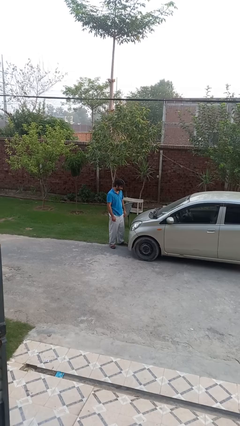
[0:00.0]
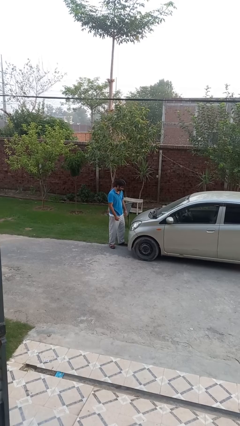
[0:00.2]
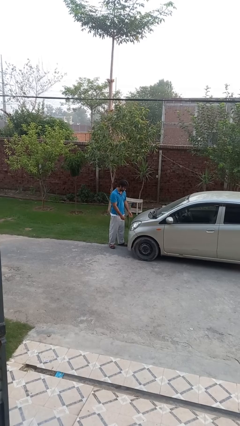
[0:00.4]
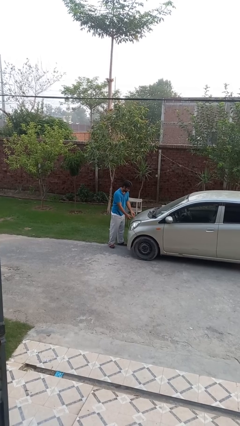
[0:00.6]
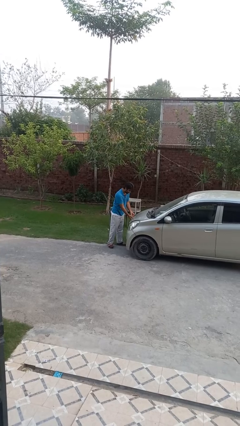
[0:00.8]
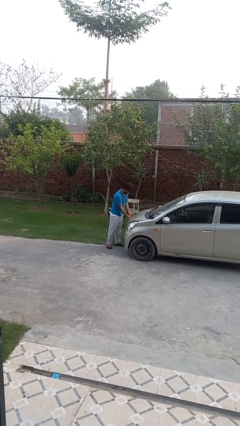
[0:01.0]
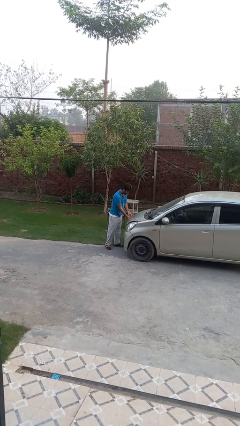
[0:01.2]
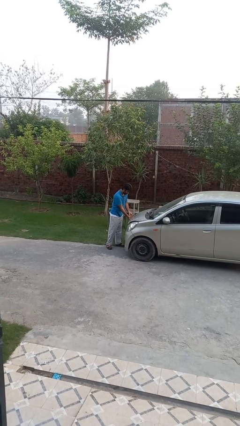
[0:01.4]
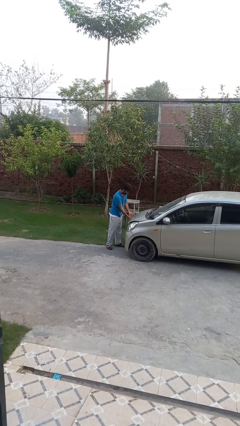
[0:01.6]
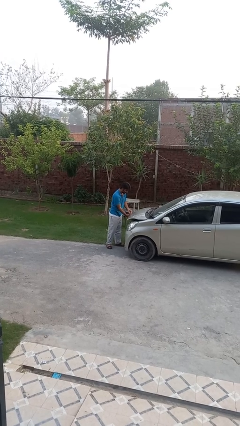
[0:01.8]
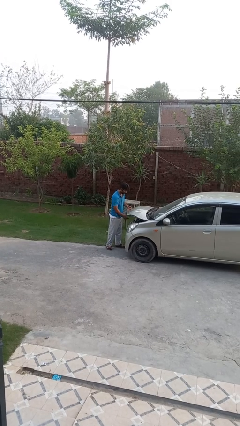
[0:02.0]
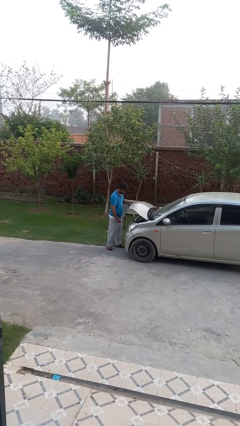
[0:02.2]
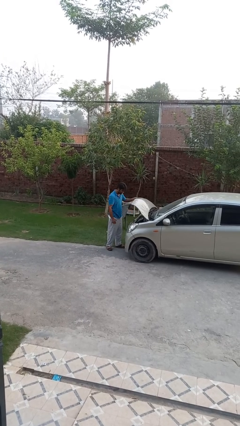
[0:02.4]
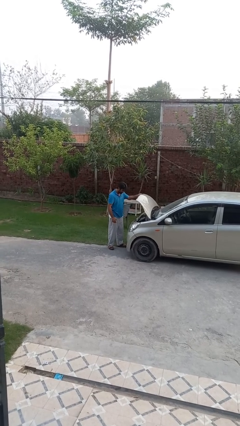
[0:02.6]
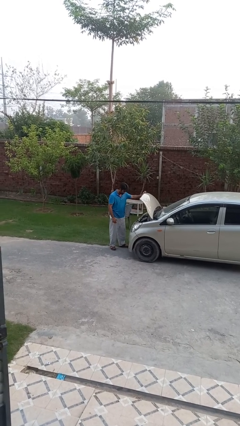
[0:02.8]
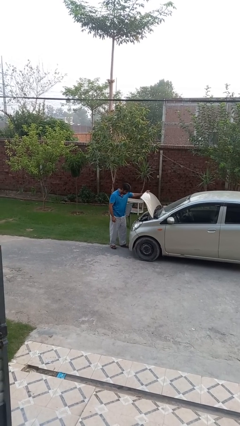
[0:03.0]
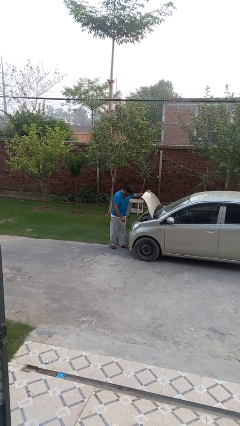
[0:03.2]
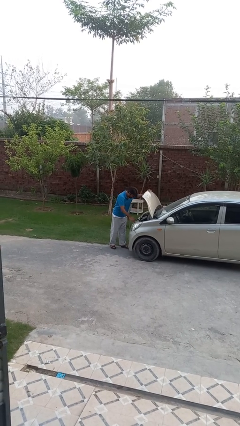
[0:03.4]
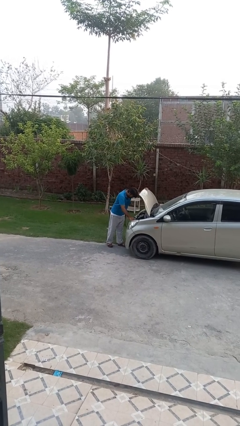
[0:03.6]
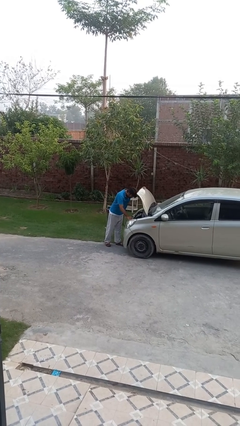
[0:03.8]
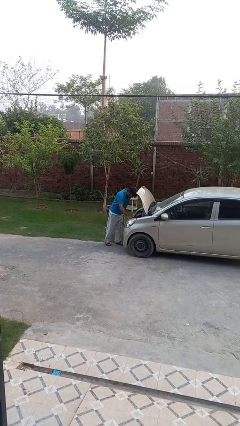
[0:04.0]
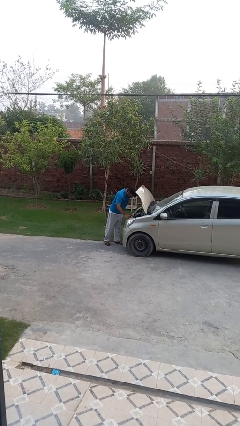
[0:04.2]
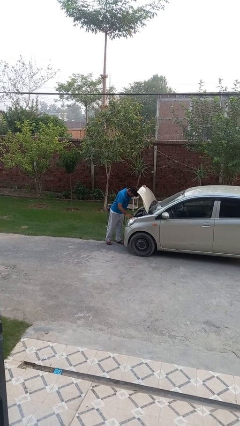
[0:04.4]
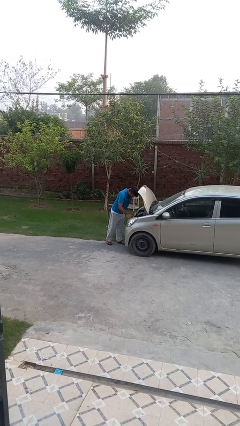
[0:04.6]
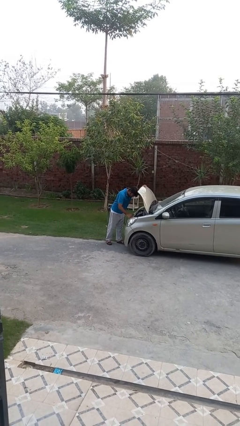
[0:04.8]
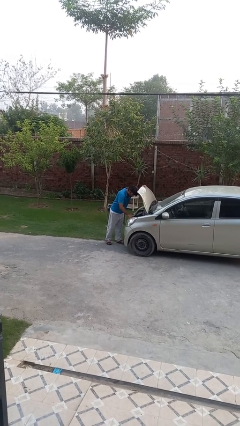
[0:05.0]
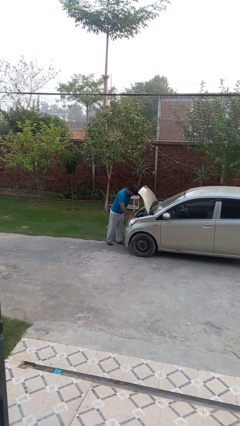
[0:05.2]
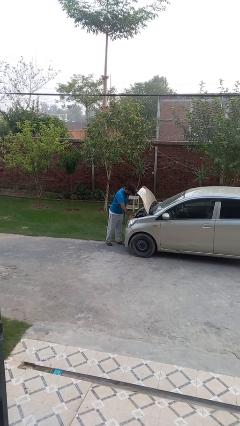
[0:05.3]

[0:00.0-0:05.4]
person opens car hood

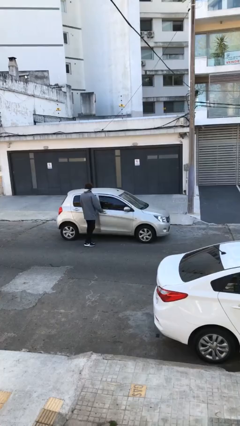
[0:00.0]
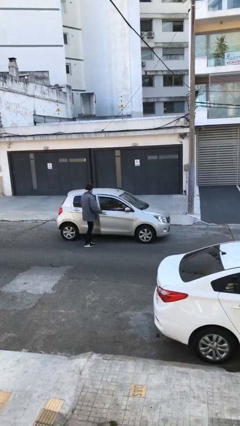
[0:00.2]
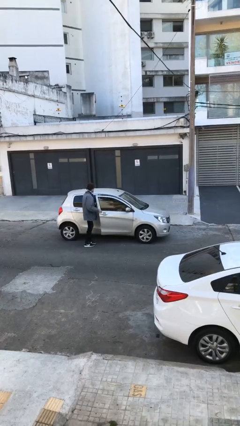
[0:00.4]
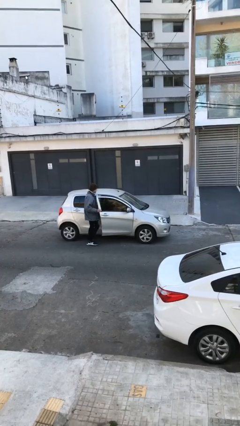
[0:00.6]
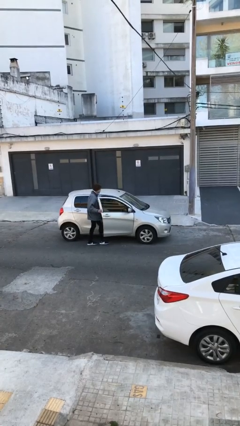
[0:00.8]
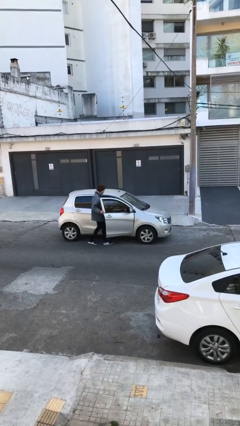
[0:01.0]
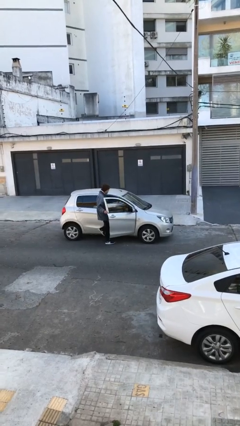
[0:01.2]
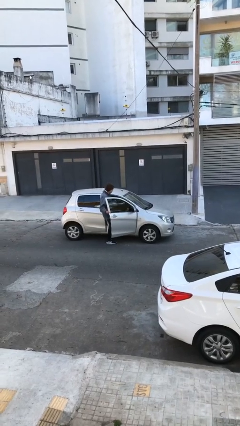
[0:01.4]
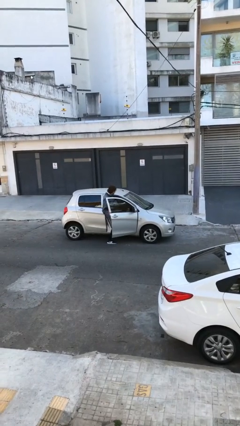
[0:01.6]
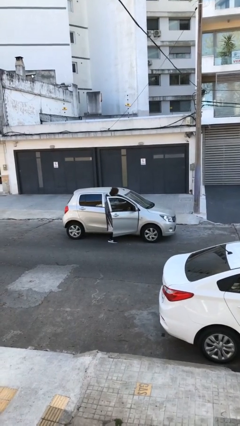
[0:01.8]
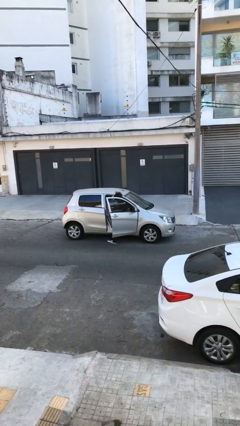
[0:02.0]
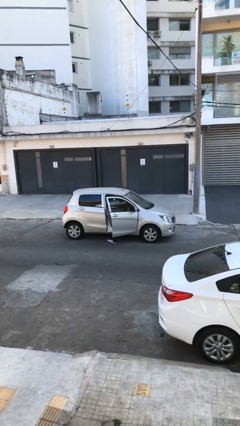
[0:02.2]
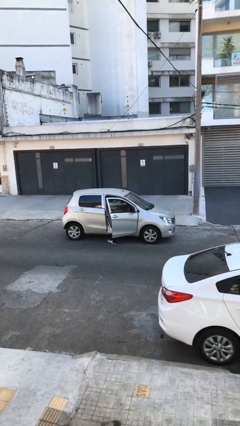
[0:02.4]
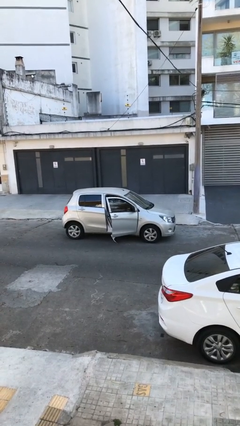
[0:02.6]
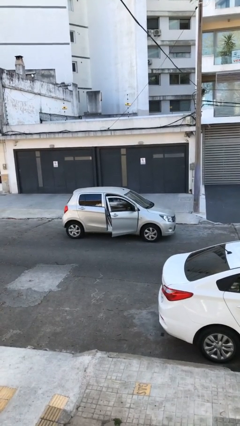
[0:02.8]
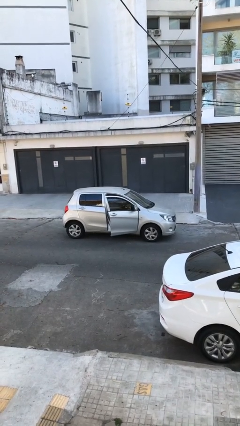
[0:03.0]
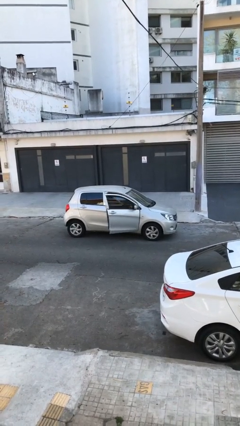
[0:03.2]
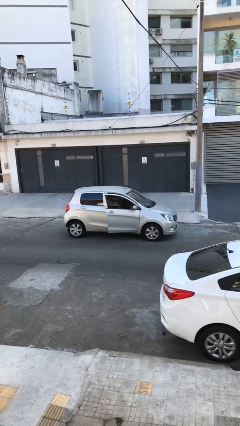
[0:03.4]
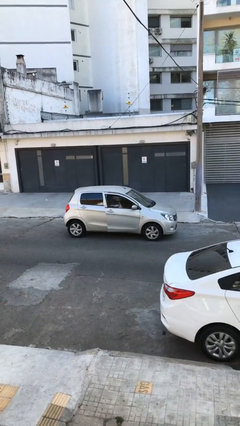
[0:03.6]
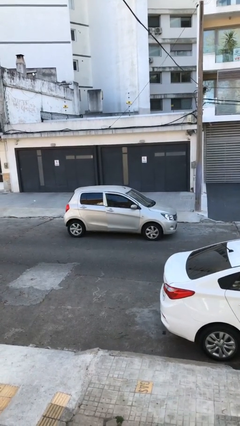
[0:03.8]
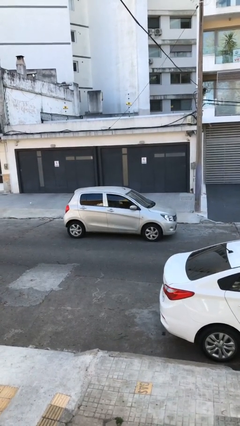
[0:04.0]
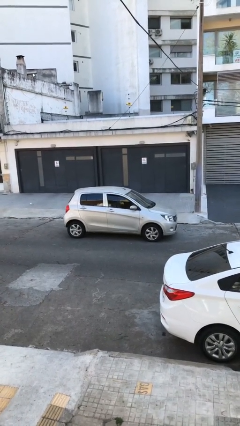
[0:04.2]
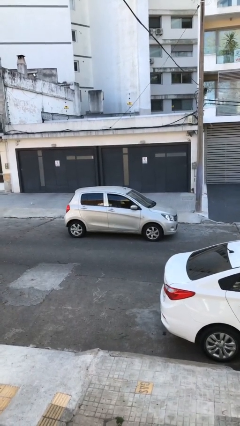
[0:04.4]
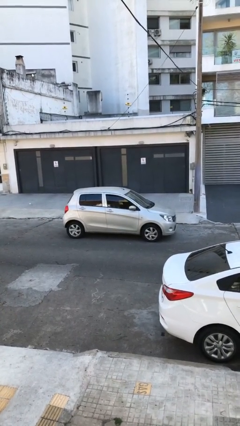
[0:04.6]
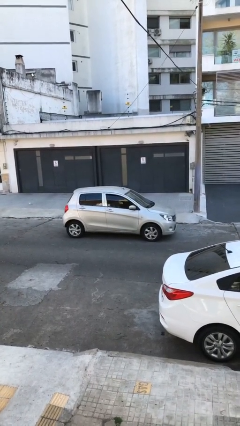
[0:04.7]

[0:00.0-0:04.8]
car picks up person

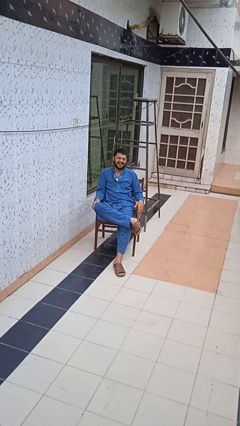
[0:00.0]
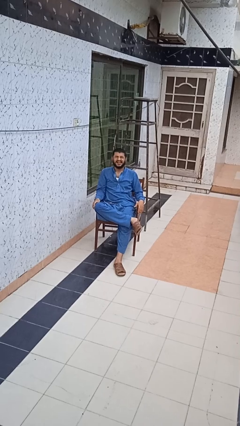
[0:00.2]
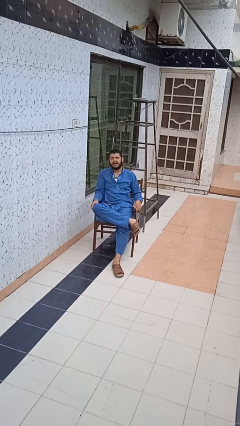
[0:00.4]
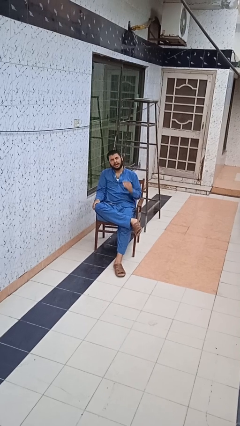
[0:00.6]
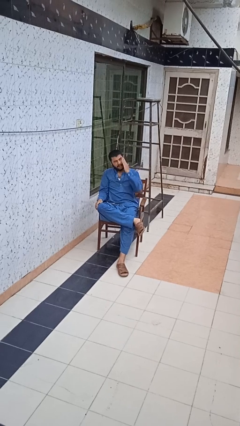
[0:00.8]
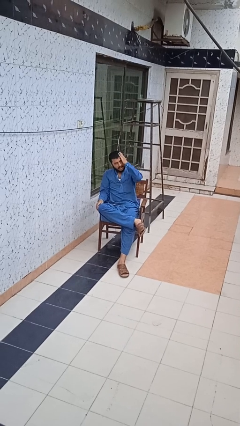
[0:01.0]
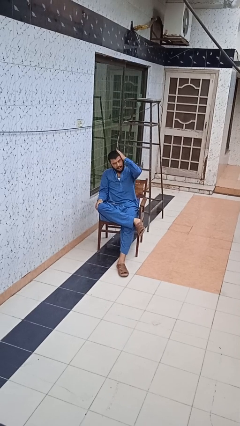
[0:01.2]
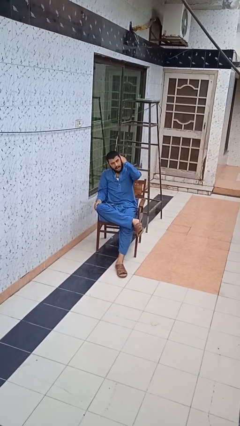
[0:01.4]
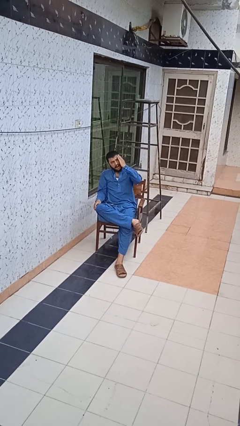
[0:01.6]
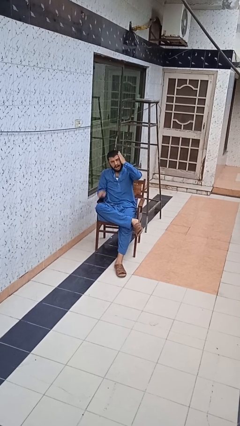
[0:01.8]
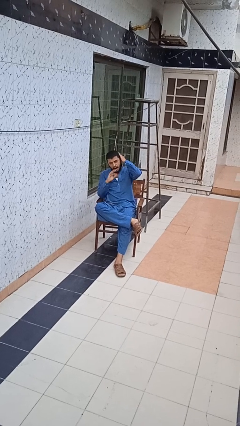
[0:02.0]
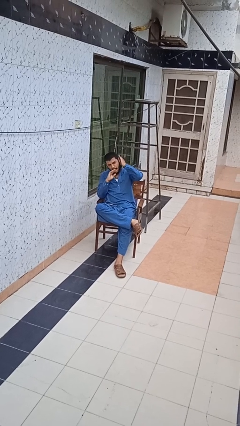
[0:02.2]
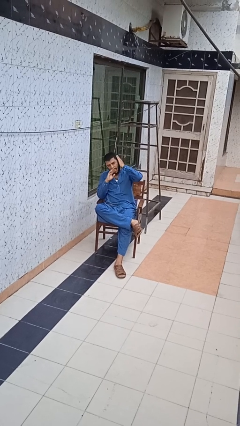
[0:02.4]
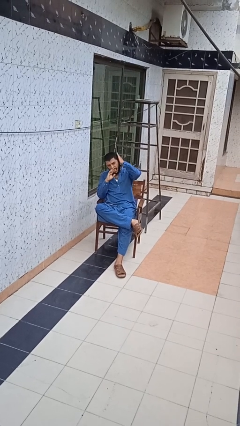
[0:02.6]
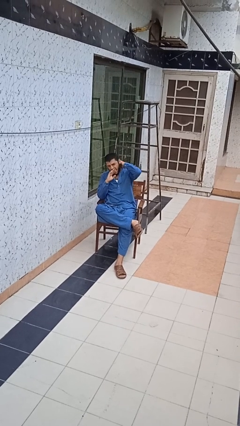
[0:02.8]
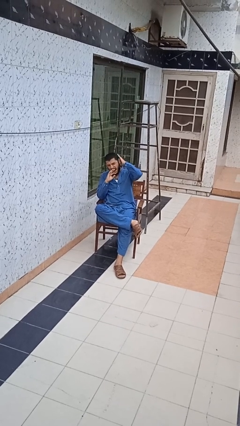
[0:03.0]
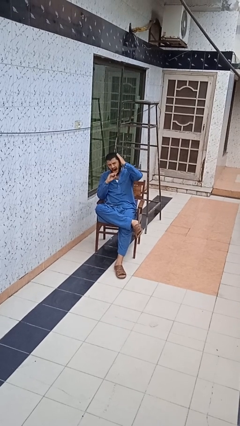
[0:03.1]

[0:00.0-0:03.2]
person strokes hair

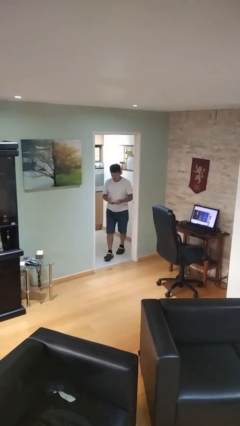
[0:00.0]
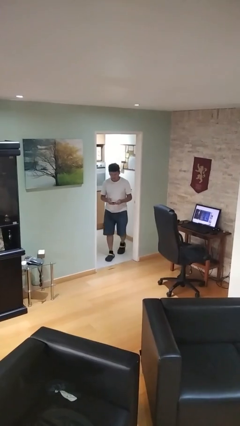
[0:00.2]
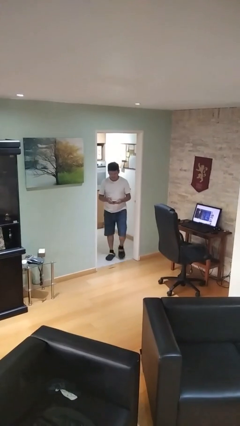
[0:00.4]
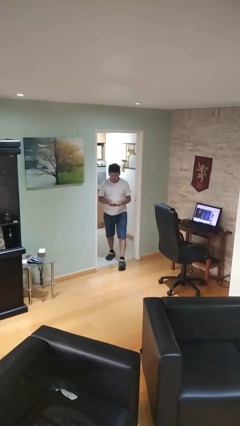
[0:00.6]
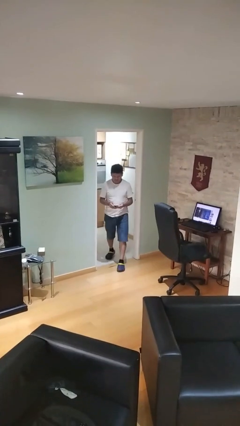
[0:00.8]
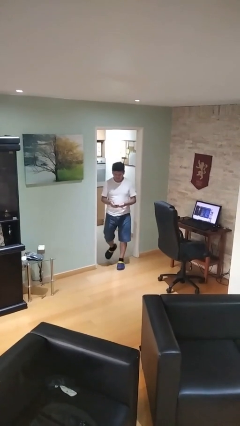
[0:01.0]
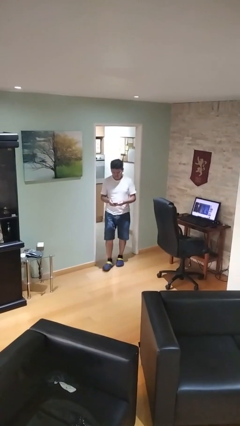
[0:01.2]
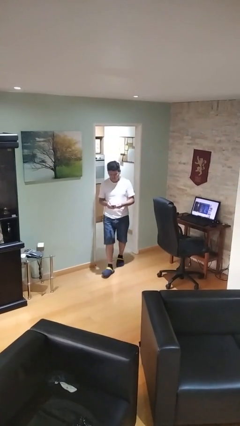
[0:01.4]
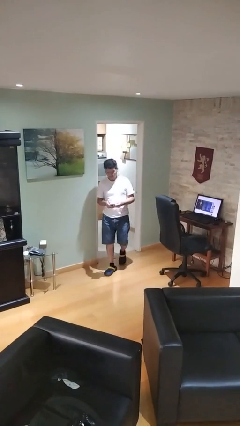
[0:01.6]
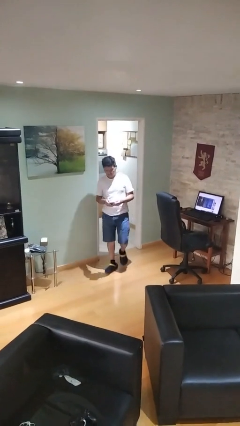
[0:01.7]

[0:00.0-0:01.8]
person enters scene through structure

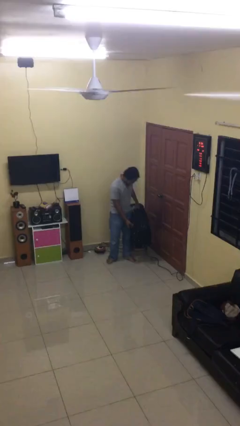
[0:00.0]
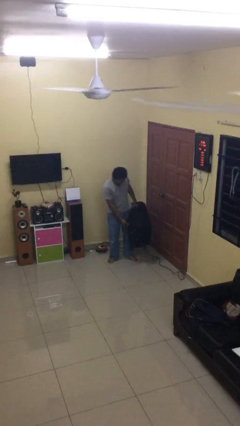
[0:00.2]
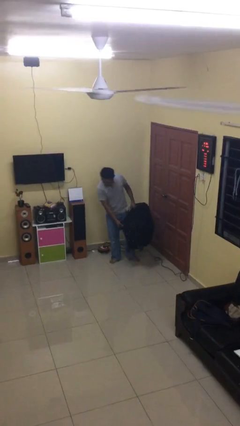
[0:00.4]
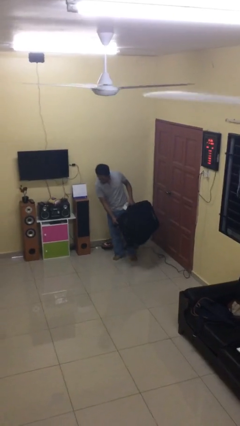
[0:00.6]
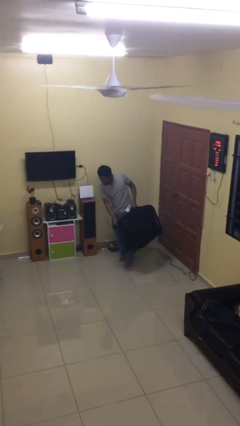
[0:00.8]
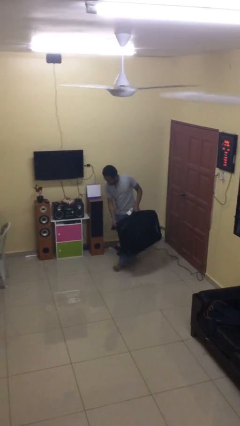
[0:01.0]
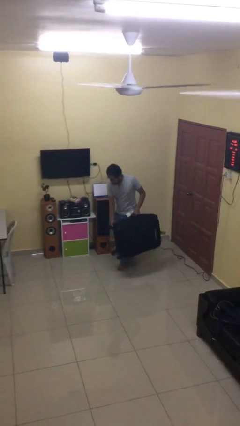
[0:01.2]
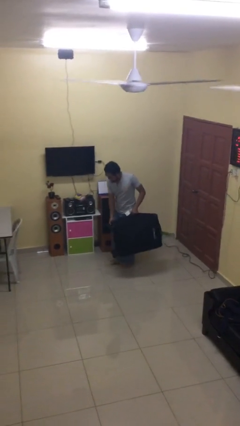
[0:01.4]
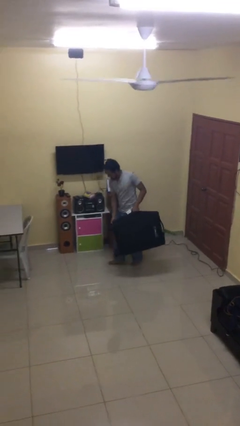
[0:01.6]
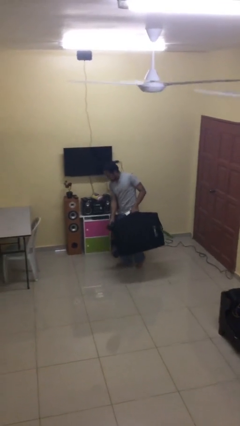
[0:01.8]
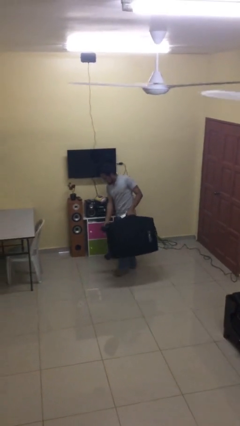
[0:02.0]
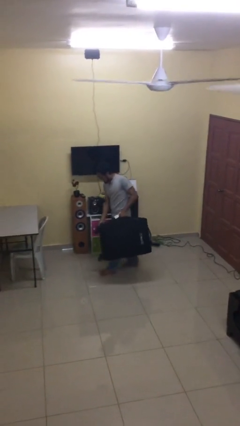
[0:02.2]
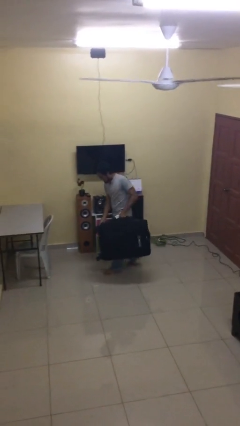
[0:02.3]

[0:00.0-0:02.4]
person carries heavy object

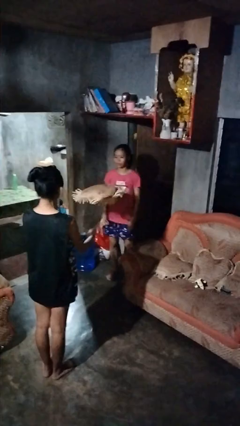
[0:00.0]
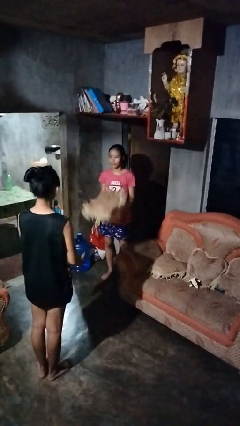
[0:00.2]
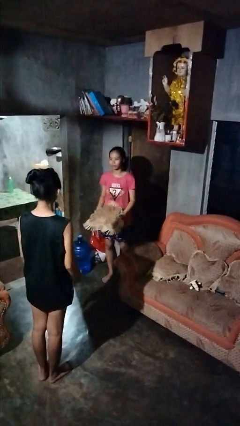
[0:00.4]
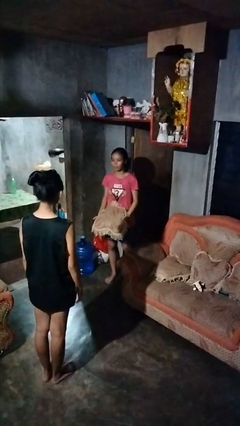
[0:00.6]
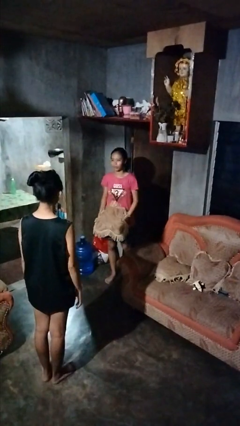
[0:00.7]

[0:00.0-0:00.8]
person catches object from person
